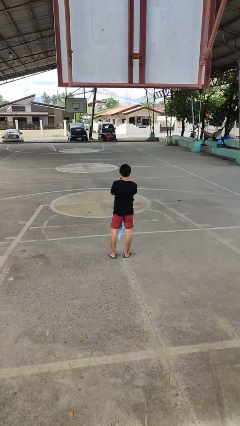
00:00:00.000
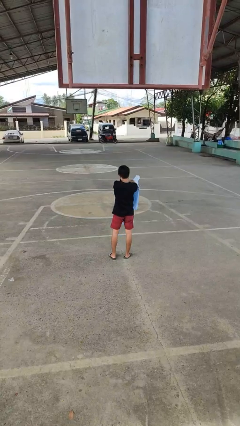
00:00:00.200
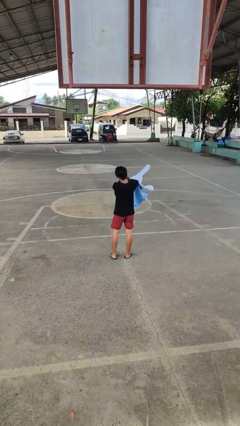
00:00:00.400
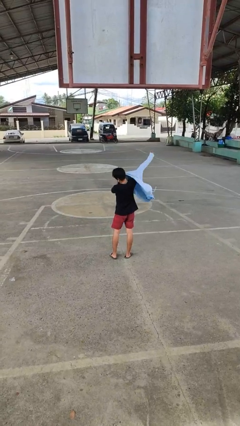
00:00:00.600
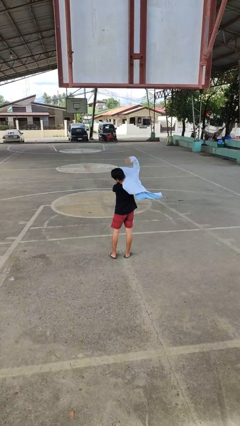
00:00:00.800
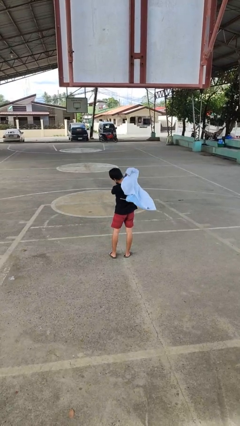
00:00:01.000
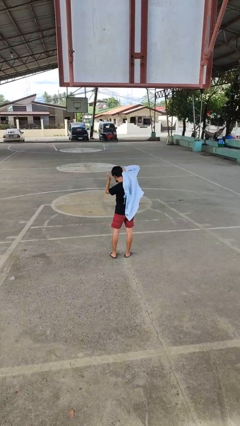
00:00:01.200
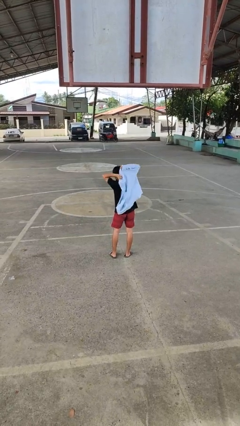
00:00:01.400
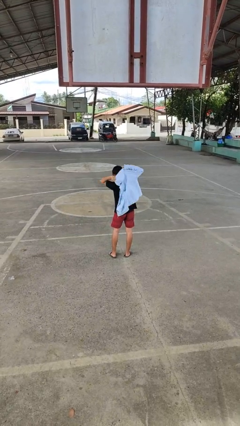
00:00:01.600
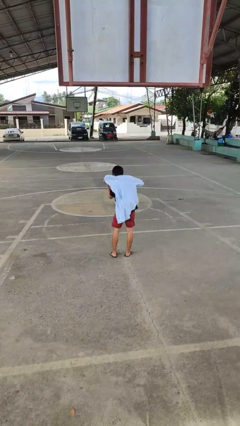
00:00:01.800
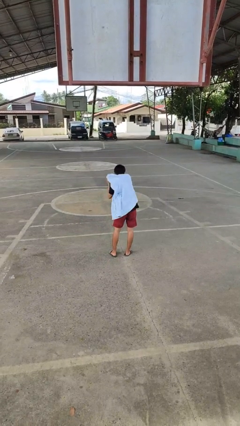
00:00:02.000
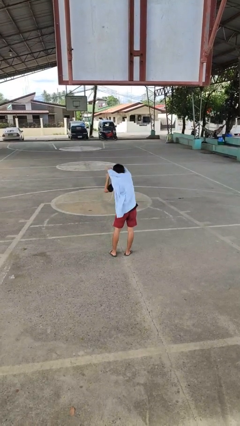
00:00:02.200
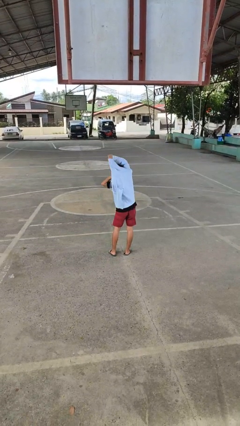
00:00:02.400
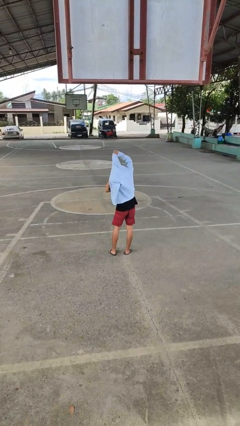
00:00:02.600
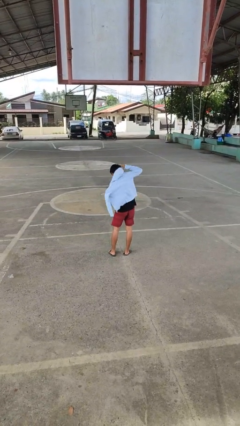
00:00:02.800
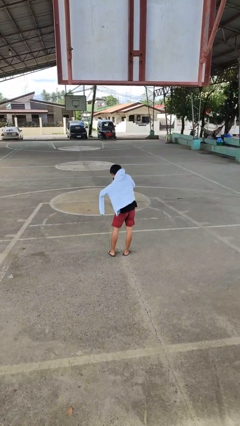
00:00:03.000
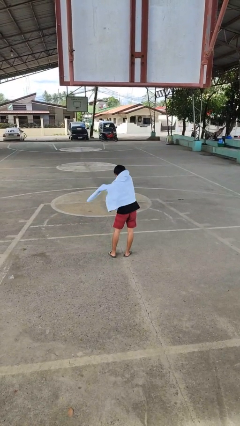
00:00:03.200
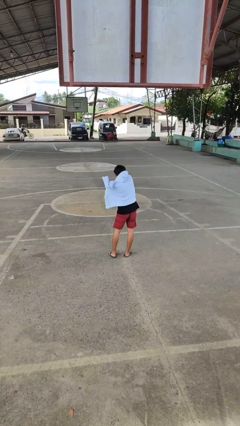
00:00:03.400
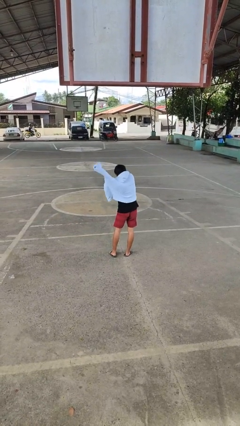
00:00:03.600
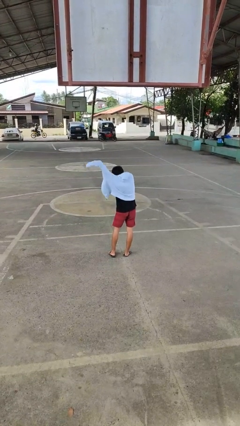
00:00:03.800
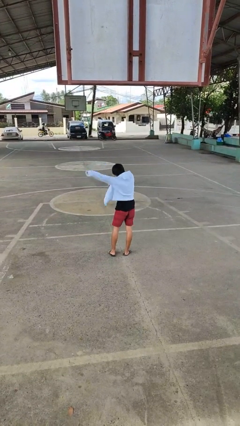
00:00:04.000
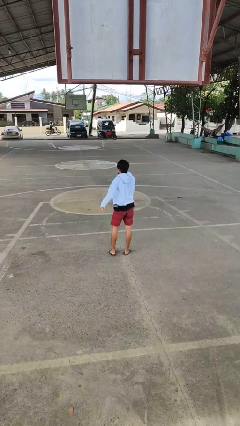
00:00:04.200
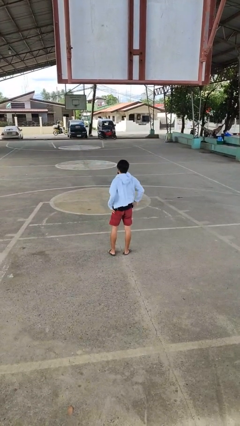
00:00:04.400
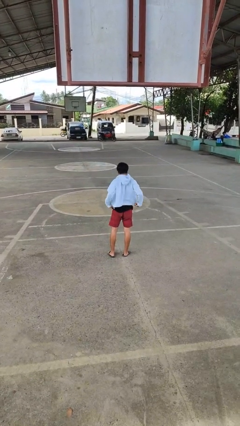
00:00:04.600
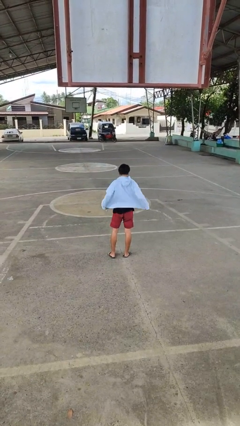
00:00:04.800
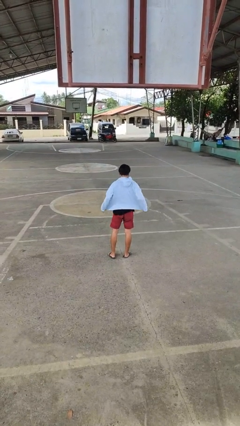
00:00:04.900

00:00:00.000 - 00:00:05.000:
person puts on jacket

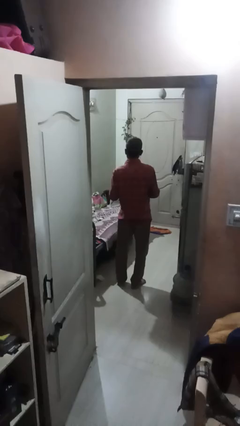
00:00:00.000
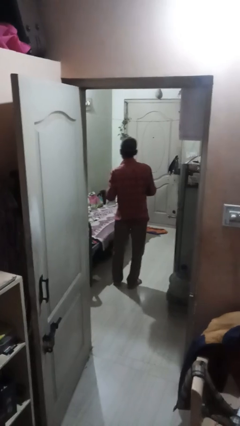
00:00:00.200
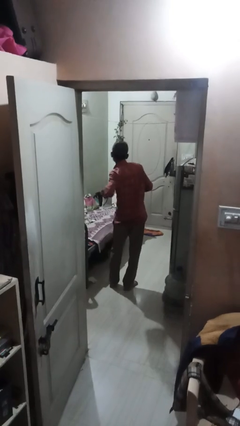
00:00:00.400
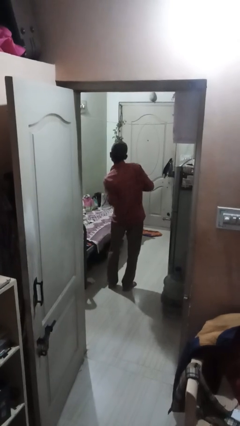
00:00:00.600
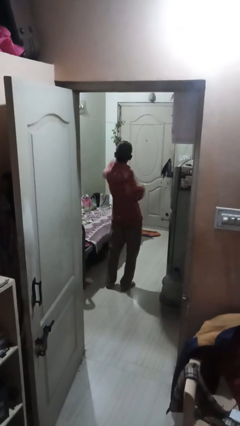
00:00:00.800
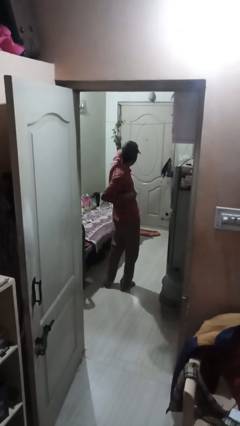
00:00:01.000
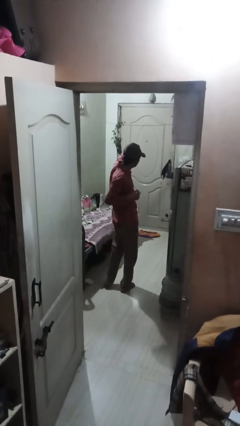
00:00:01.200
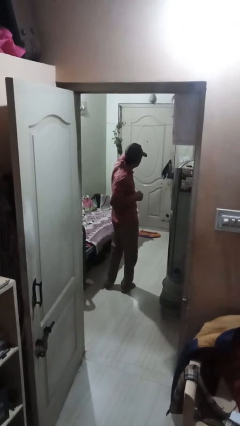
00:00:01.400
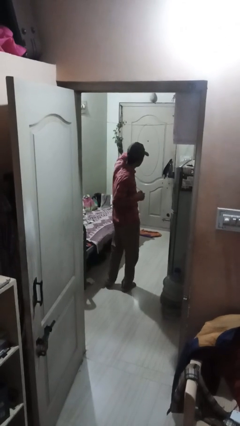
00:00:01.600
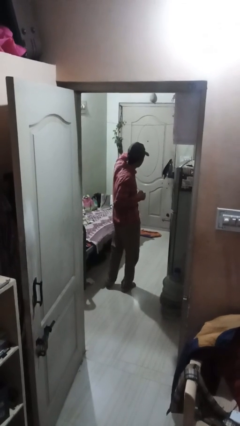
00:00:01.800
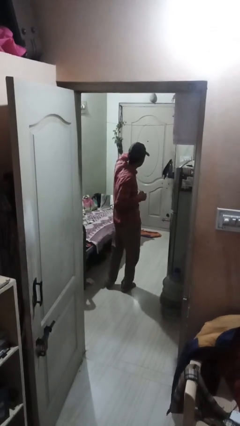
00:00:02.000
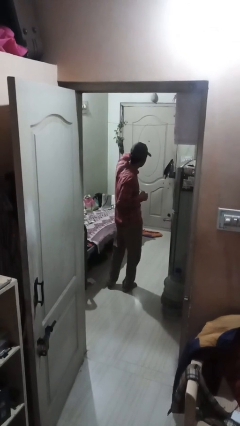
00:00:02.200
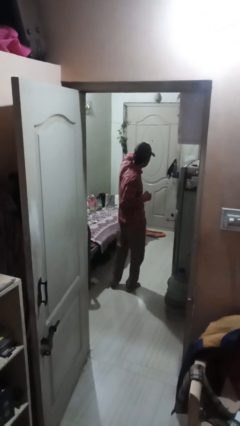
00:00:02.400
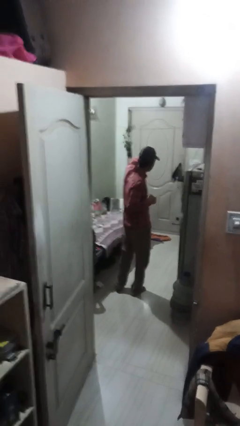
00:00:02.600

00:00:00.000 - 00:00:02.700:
person punches

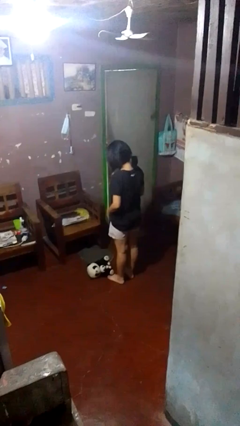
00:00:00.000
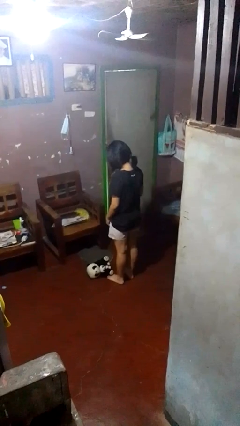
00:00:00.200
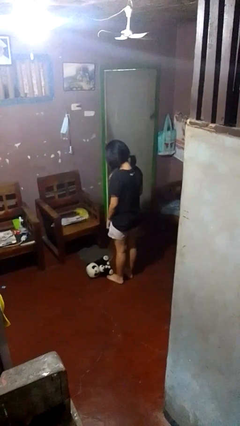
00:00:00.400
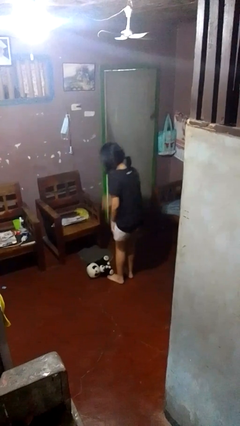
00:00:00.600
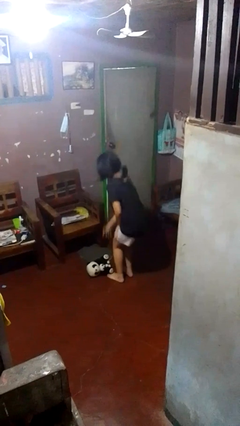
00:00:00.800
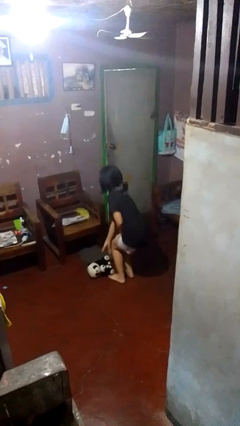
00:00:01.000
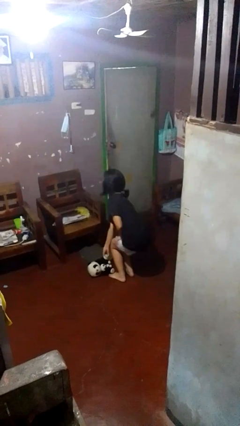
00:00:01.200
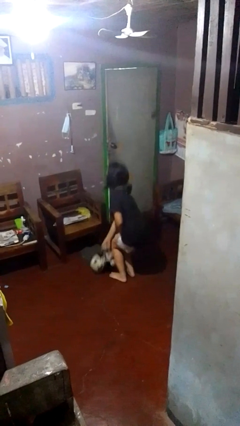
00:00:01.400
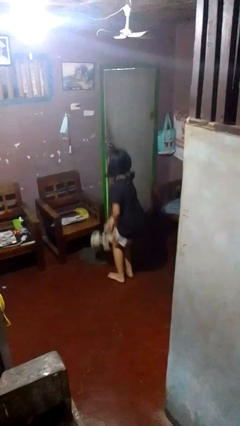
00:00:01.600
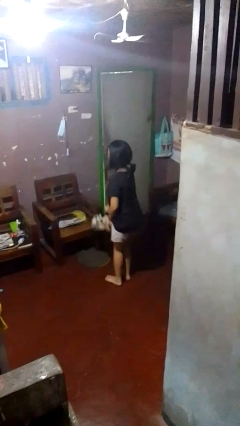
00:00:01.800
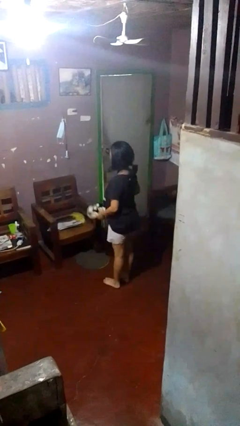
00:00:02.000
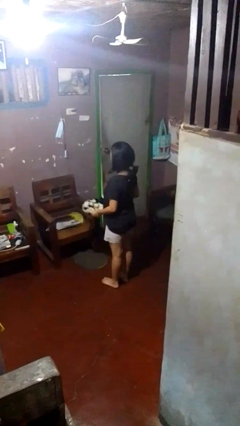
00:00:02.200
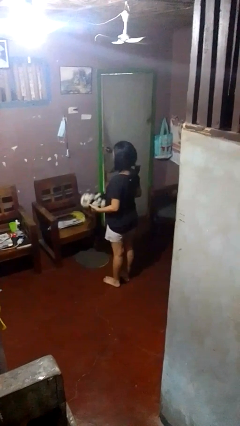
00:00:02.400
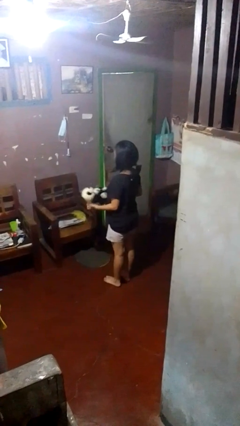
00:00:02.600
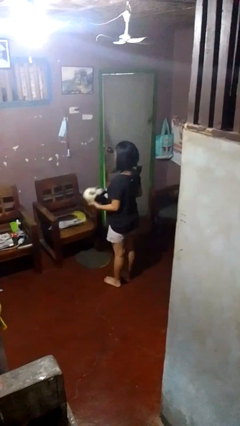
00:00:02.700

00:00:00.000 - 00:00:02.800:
person picks up object from floor

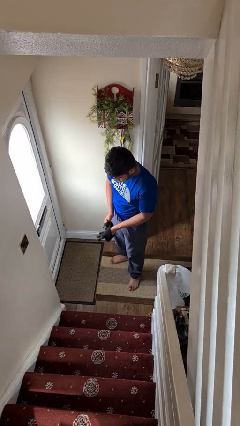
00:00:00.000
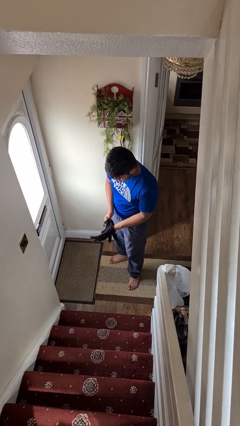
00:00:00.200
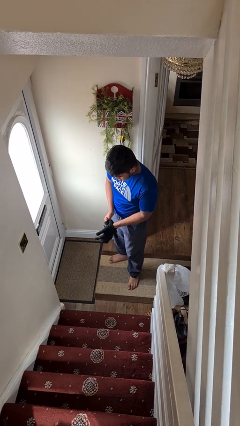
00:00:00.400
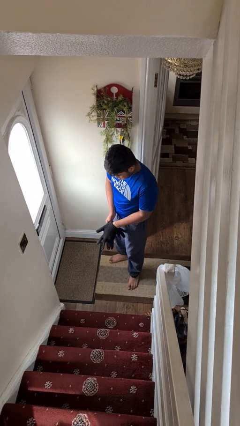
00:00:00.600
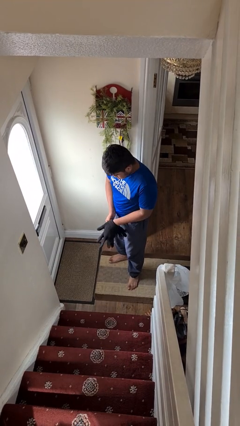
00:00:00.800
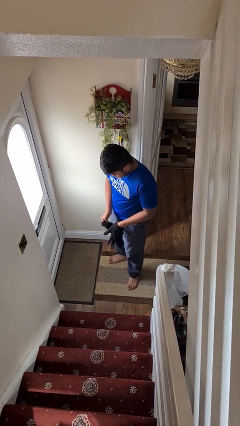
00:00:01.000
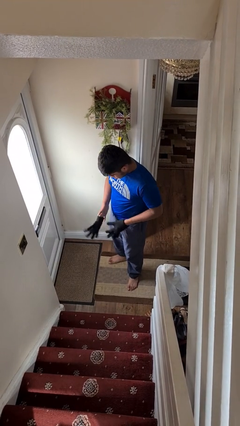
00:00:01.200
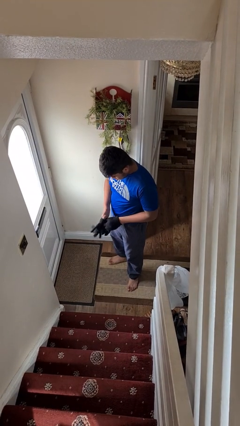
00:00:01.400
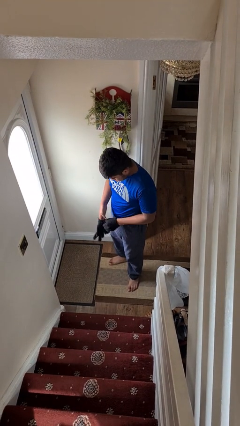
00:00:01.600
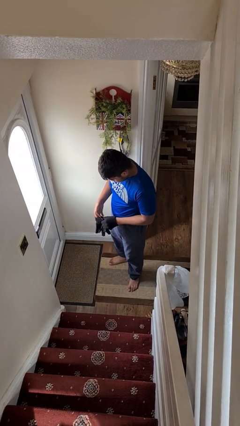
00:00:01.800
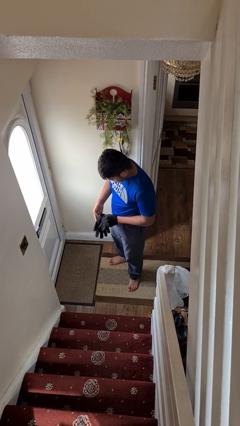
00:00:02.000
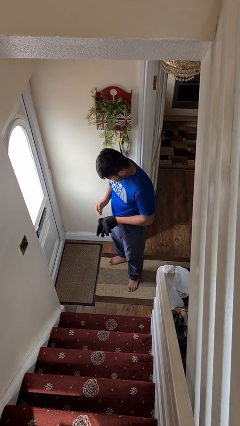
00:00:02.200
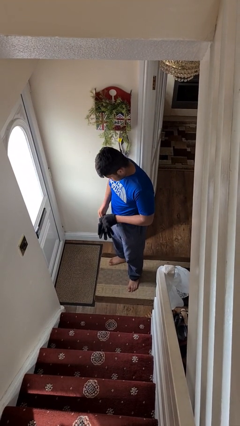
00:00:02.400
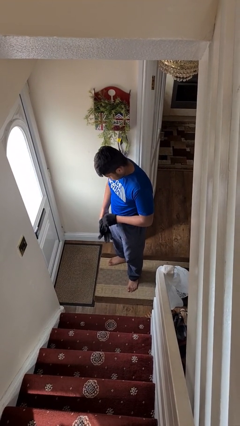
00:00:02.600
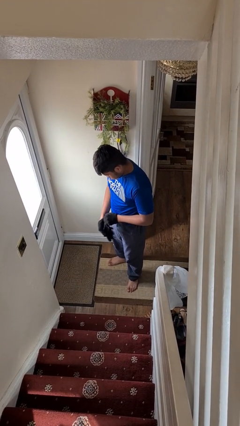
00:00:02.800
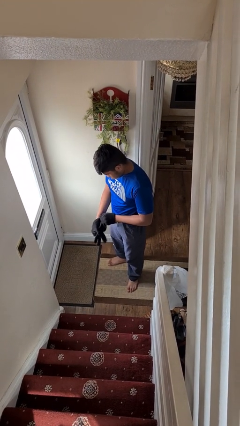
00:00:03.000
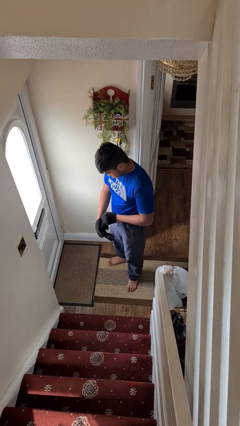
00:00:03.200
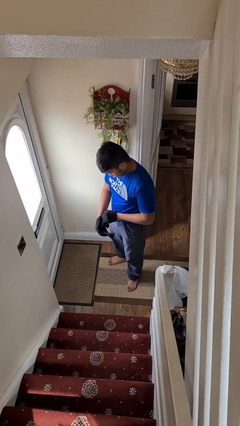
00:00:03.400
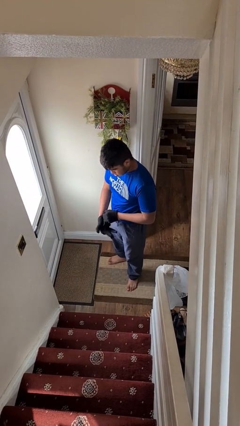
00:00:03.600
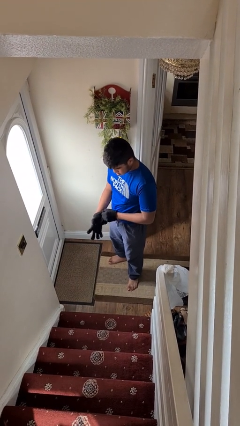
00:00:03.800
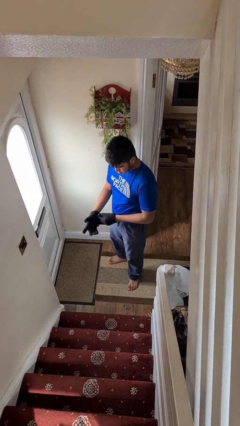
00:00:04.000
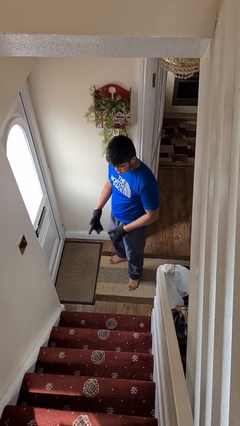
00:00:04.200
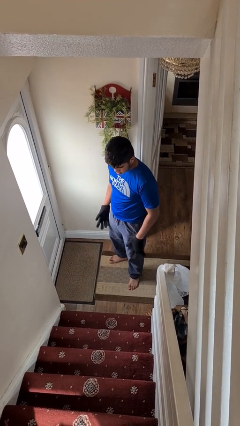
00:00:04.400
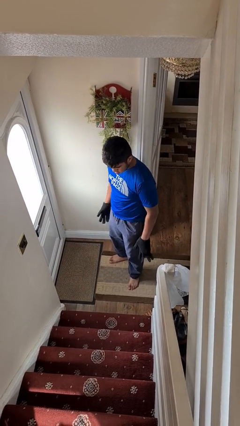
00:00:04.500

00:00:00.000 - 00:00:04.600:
person puts on gloves

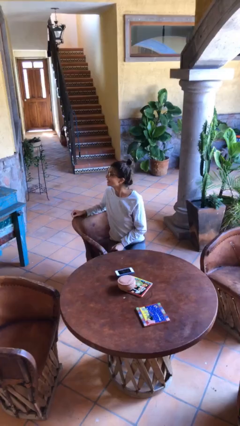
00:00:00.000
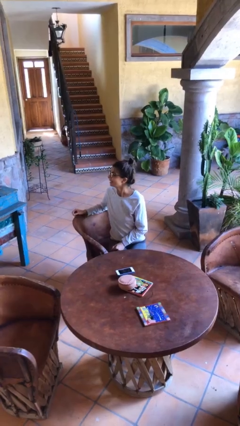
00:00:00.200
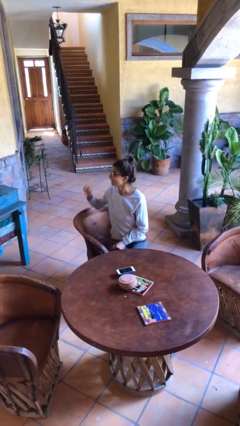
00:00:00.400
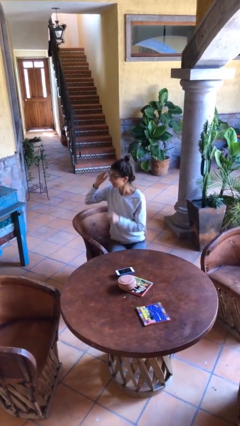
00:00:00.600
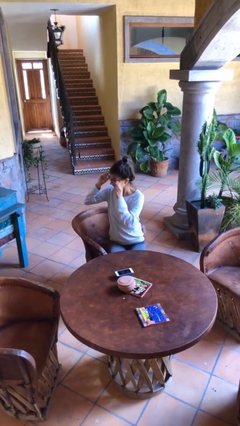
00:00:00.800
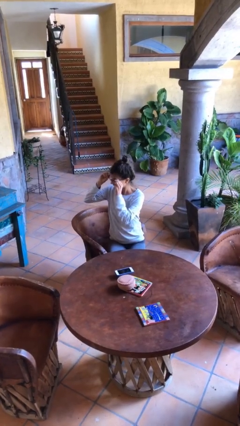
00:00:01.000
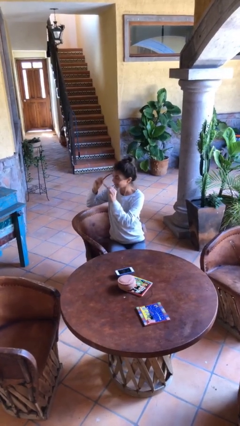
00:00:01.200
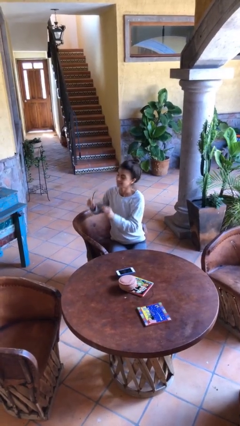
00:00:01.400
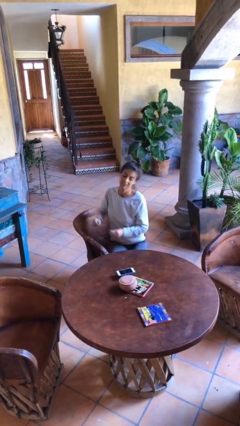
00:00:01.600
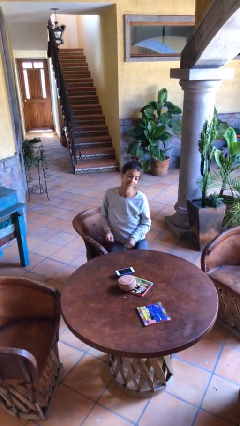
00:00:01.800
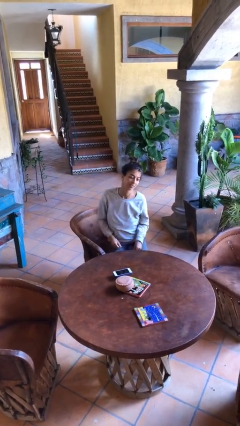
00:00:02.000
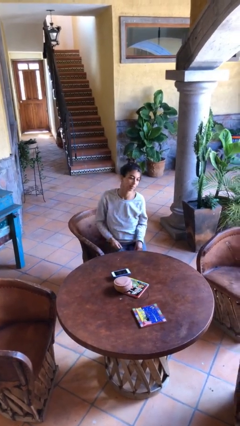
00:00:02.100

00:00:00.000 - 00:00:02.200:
person takes off glasses
